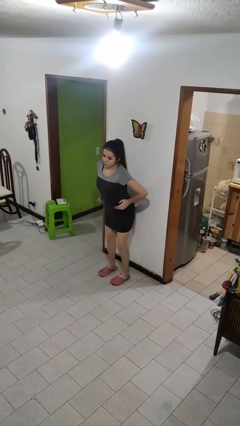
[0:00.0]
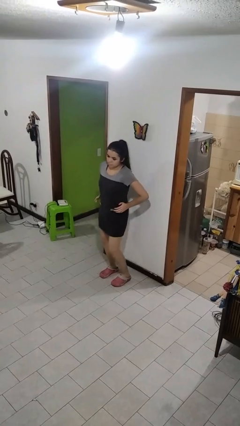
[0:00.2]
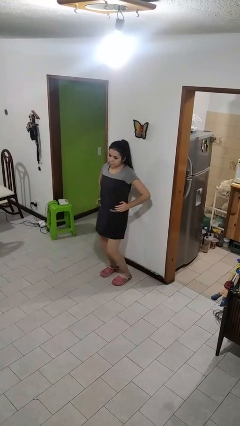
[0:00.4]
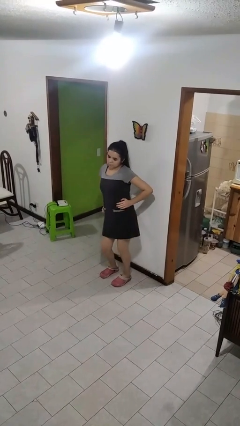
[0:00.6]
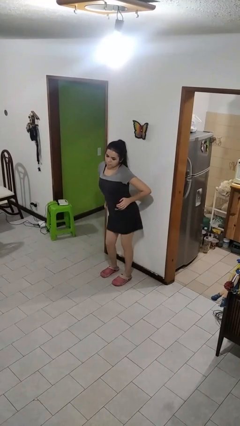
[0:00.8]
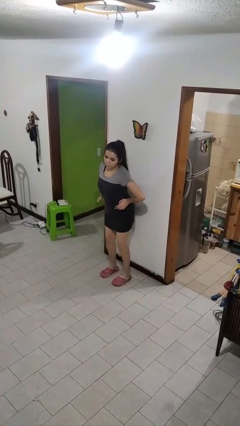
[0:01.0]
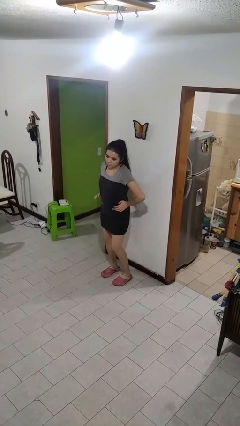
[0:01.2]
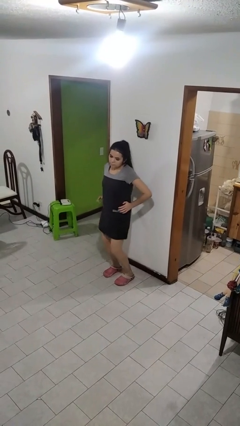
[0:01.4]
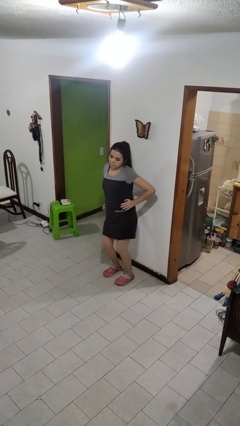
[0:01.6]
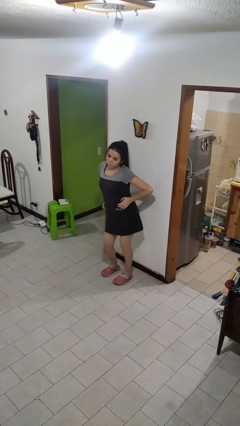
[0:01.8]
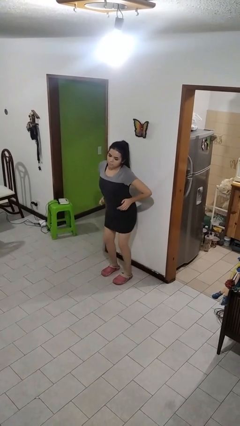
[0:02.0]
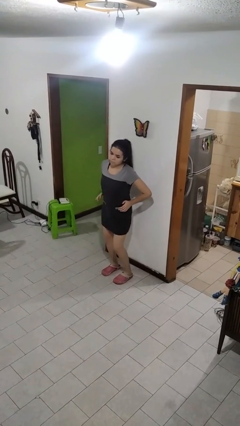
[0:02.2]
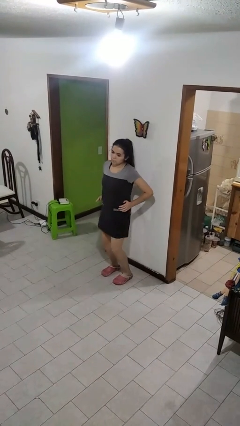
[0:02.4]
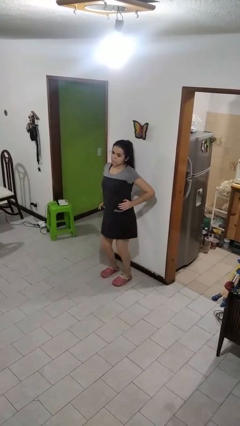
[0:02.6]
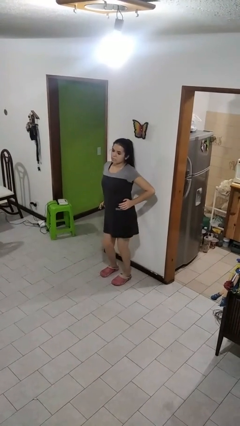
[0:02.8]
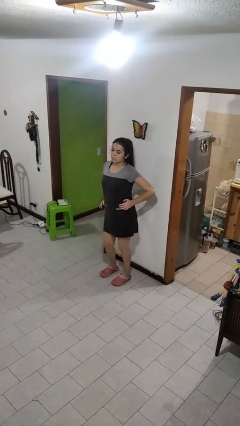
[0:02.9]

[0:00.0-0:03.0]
person wiggles hips

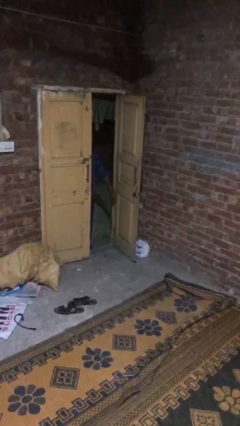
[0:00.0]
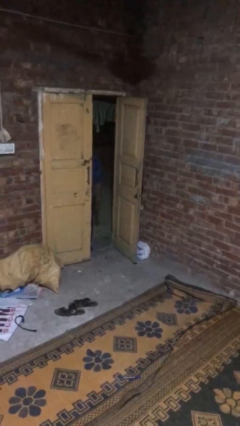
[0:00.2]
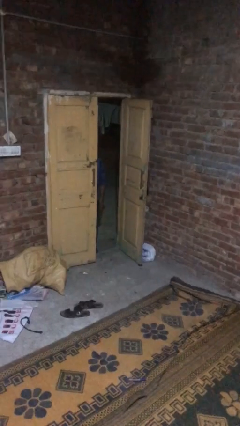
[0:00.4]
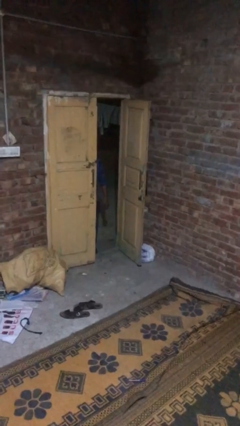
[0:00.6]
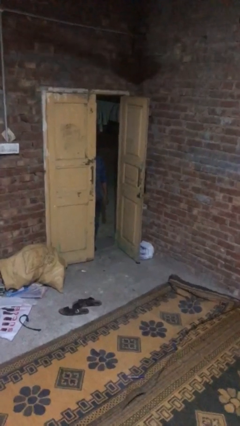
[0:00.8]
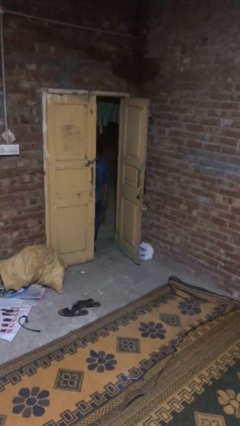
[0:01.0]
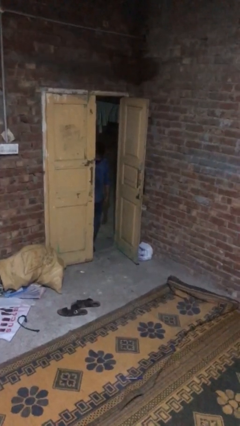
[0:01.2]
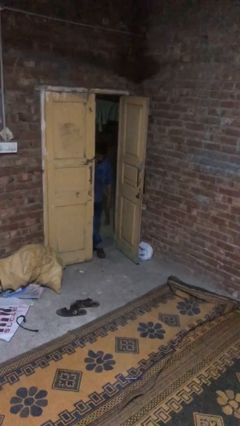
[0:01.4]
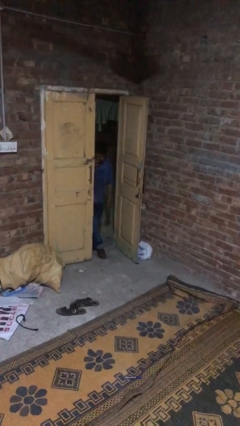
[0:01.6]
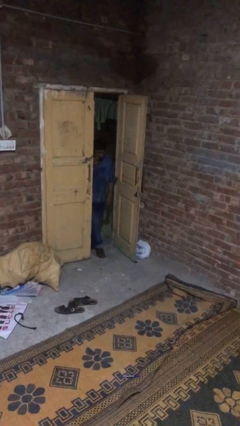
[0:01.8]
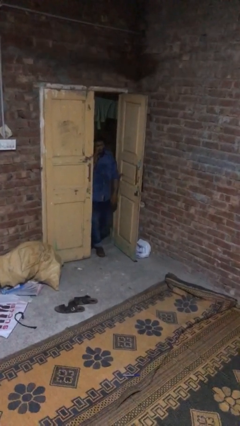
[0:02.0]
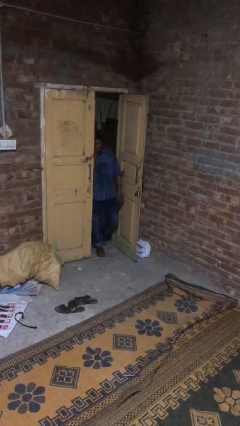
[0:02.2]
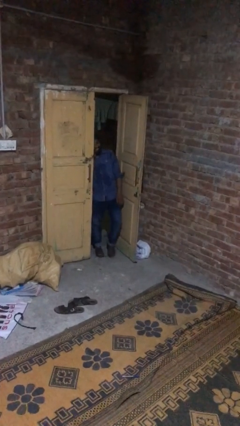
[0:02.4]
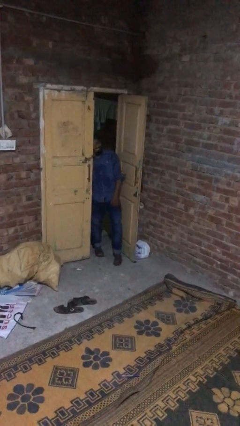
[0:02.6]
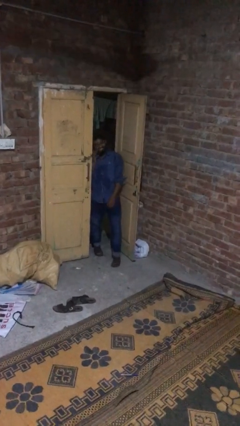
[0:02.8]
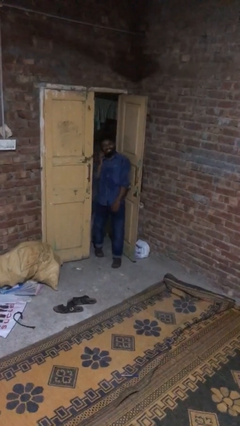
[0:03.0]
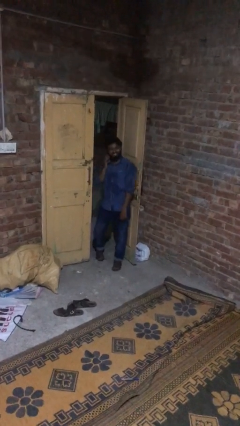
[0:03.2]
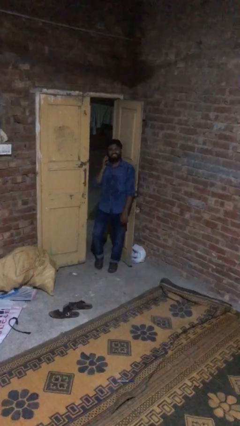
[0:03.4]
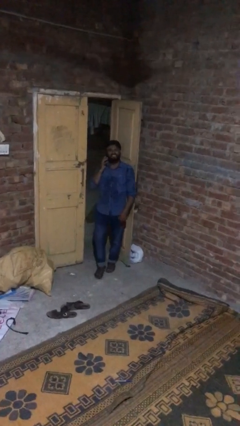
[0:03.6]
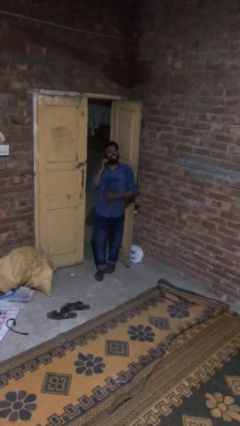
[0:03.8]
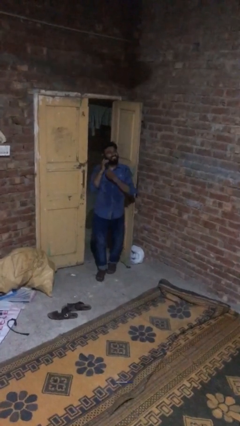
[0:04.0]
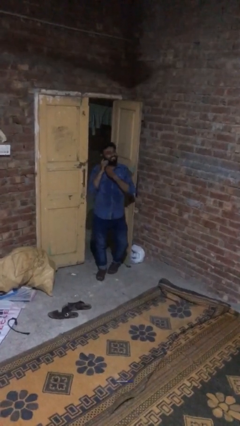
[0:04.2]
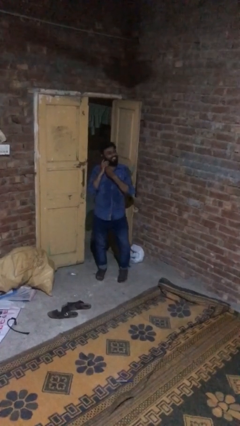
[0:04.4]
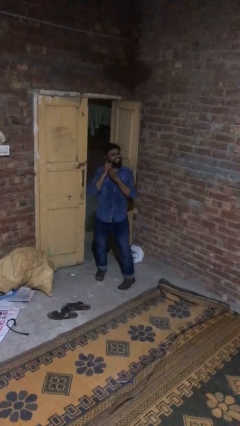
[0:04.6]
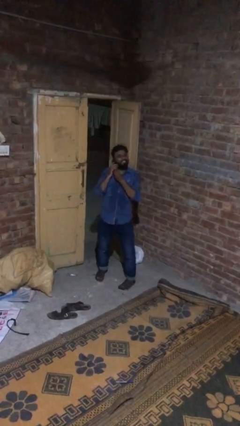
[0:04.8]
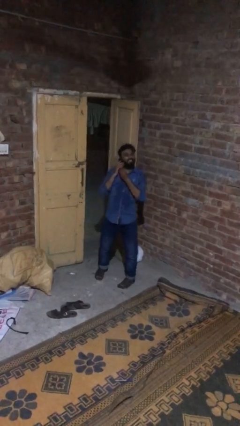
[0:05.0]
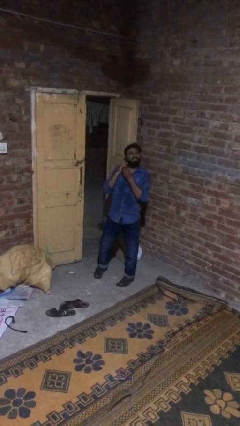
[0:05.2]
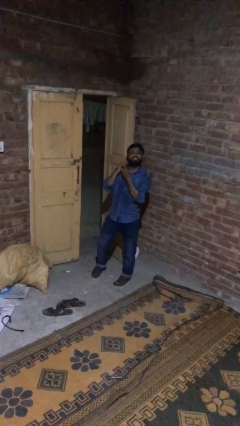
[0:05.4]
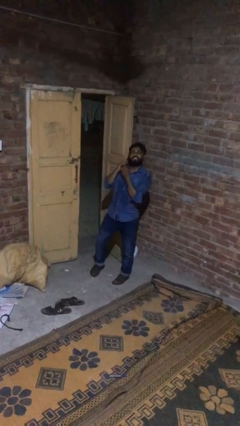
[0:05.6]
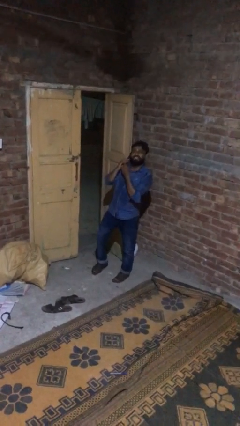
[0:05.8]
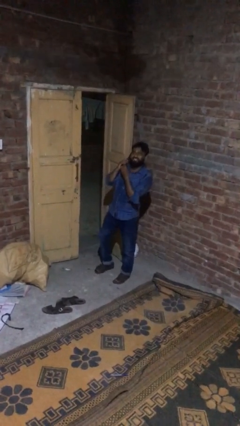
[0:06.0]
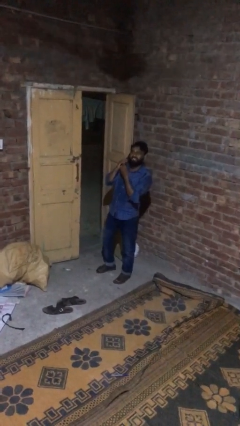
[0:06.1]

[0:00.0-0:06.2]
person enters scene through structure

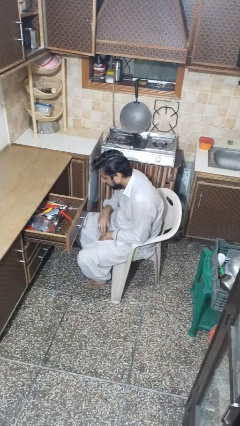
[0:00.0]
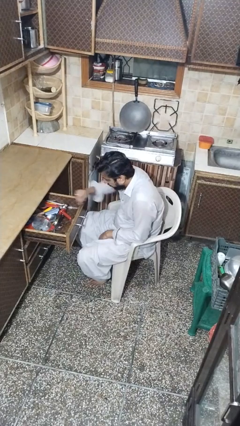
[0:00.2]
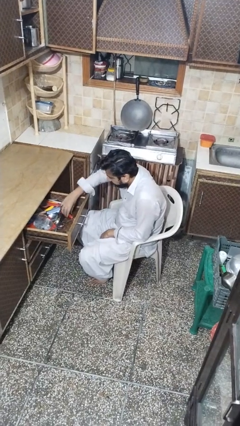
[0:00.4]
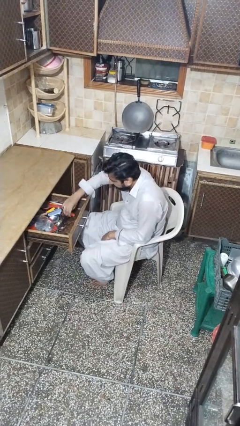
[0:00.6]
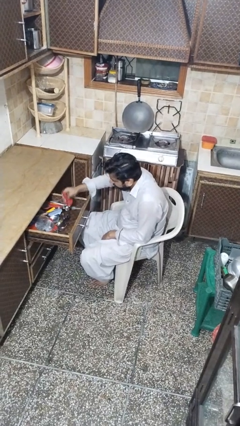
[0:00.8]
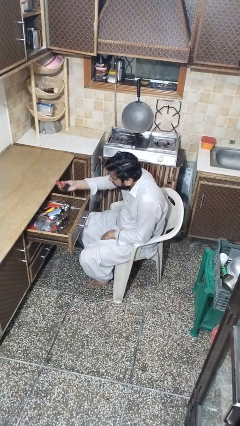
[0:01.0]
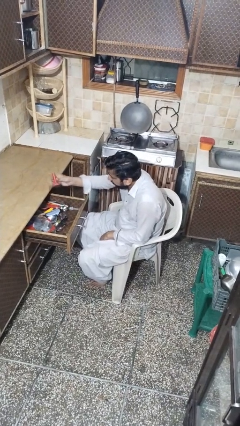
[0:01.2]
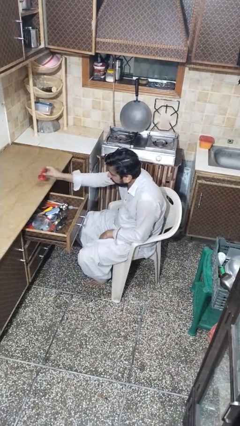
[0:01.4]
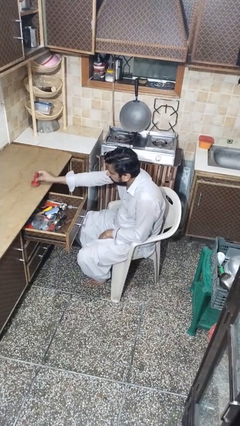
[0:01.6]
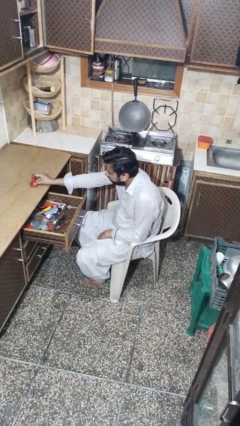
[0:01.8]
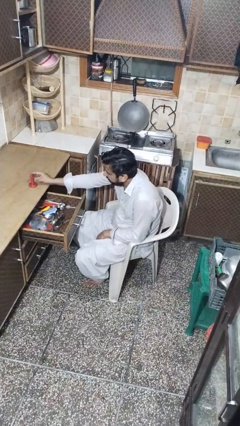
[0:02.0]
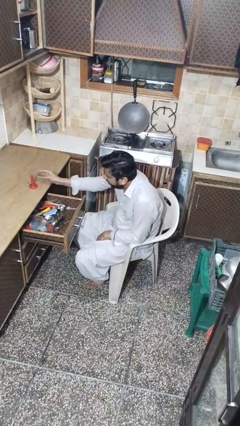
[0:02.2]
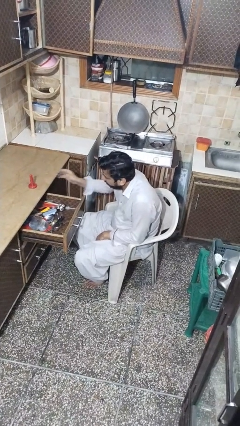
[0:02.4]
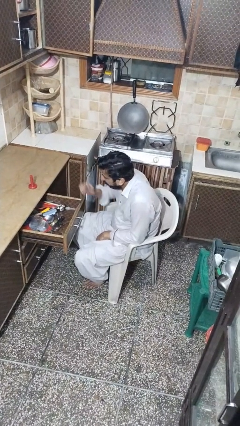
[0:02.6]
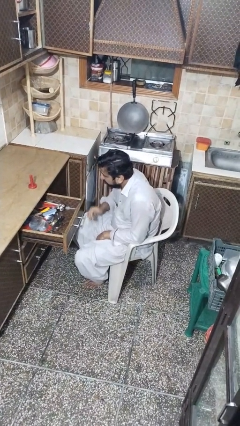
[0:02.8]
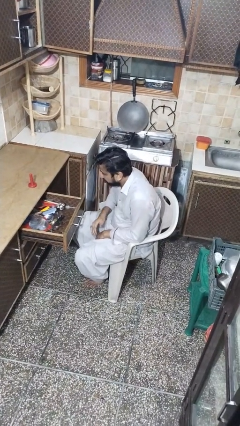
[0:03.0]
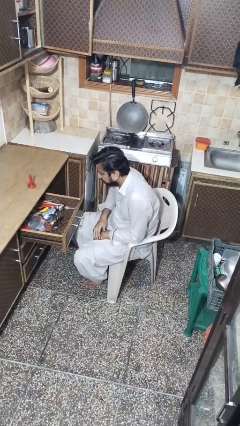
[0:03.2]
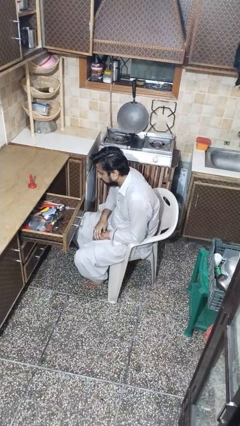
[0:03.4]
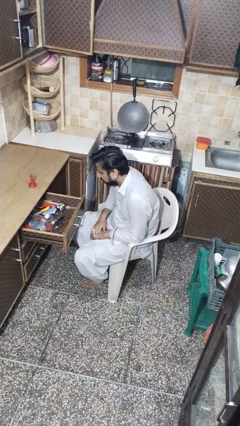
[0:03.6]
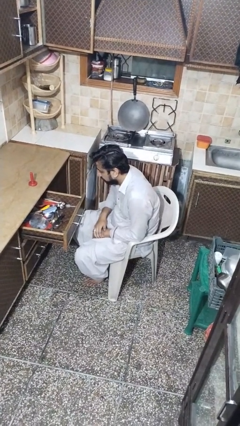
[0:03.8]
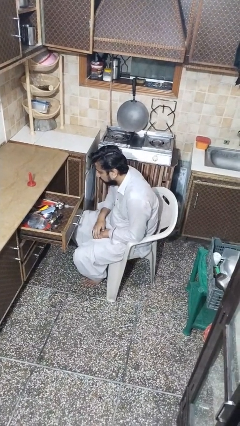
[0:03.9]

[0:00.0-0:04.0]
person takes object from kitchen drawer

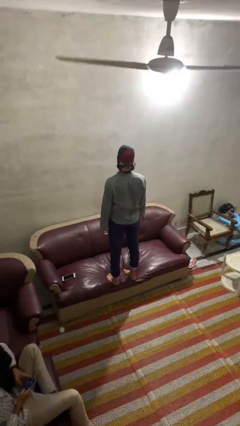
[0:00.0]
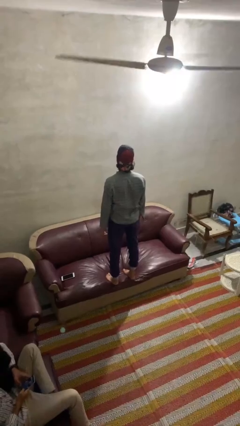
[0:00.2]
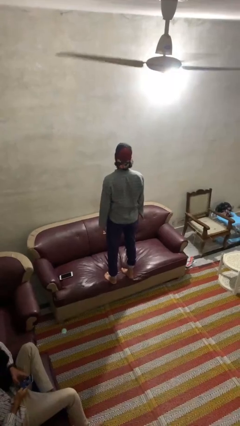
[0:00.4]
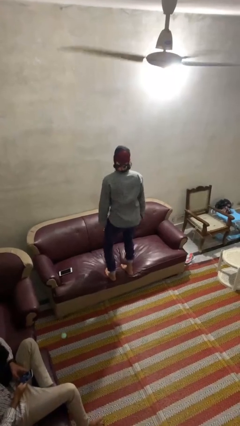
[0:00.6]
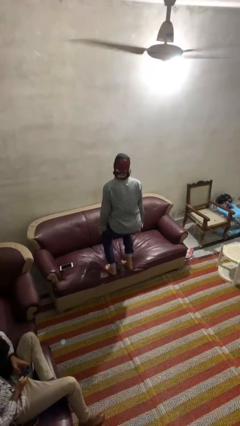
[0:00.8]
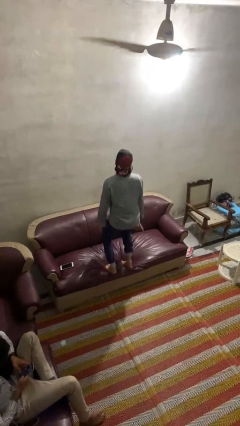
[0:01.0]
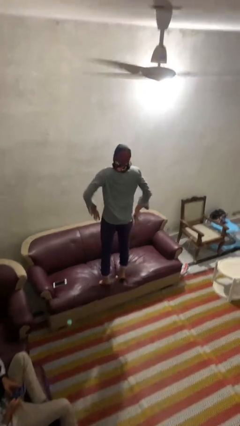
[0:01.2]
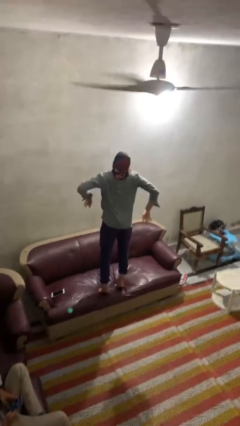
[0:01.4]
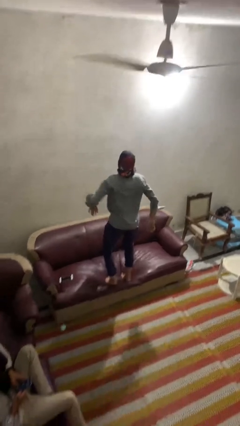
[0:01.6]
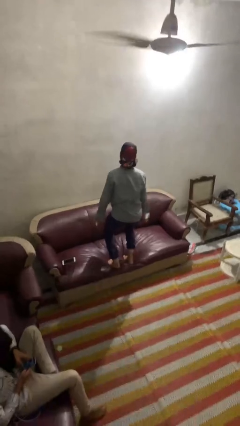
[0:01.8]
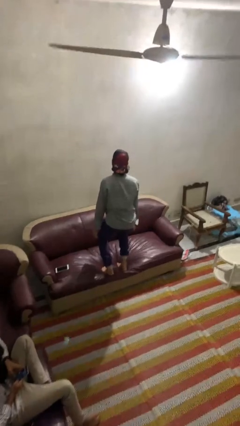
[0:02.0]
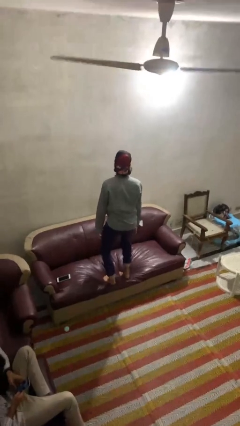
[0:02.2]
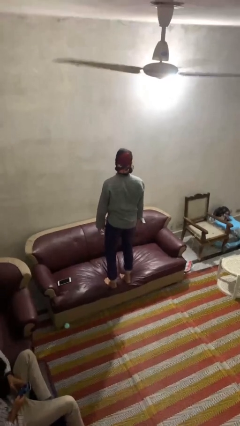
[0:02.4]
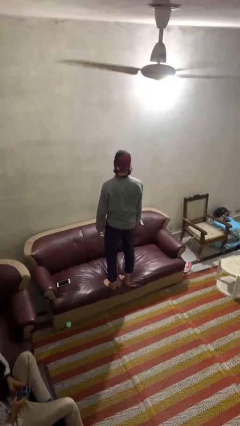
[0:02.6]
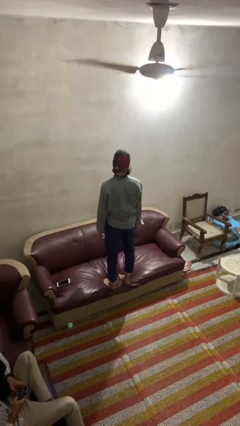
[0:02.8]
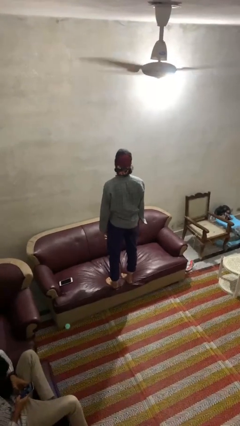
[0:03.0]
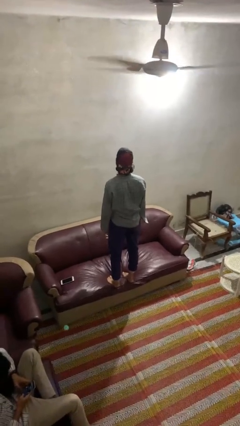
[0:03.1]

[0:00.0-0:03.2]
person jumps on couch

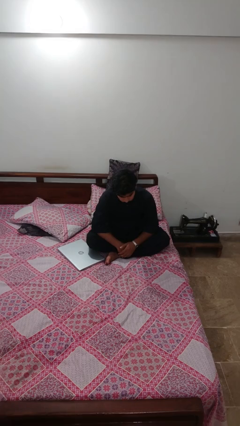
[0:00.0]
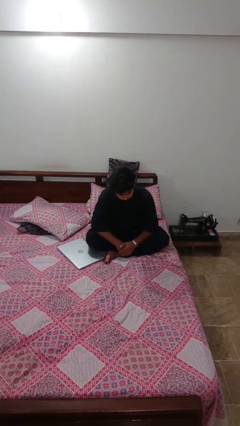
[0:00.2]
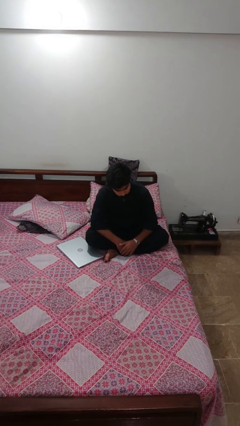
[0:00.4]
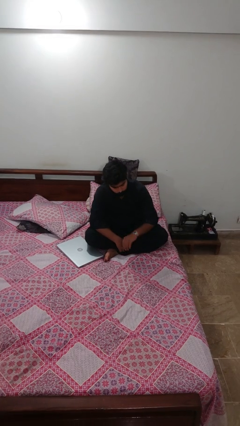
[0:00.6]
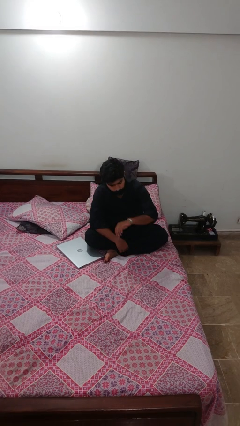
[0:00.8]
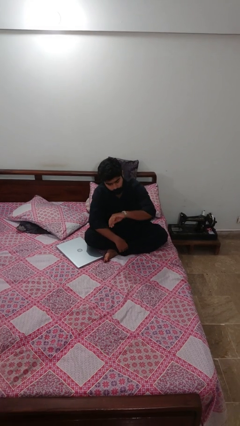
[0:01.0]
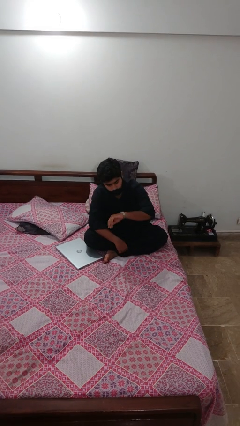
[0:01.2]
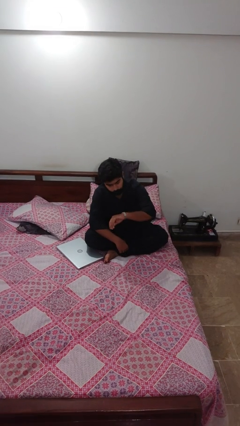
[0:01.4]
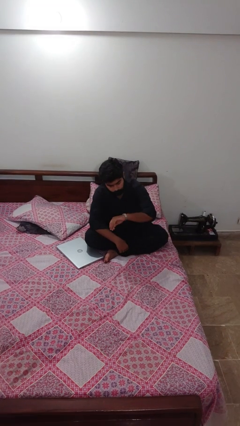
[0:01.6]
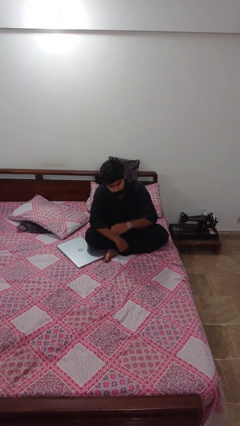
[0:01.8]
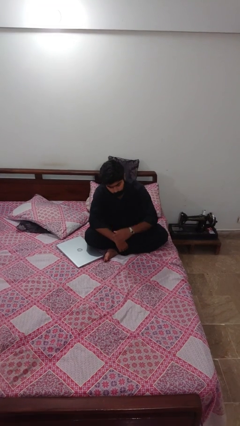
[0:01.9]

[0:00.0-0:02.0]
person looks at wristwatch
